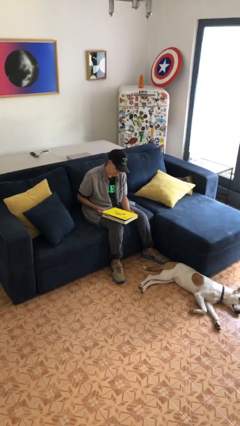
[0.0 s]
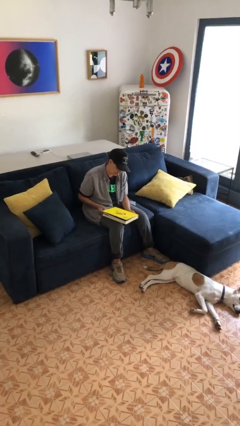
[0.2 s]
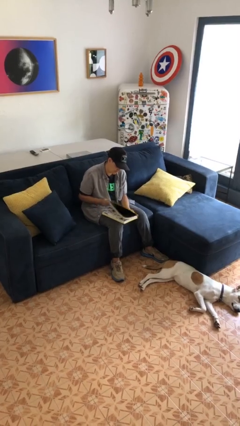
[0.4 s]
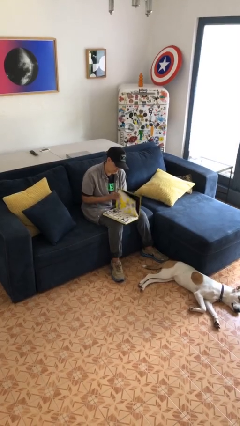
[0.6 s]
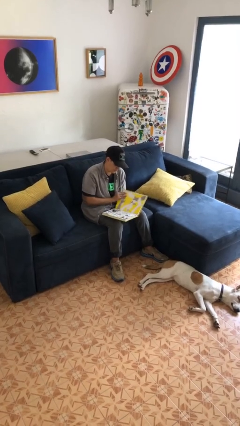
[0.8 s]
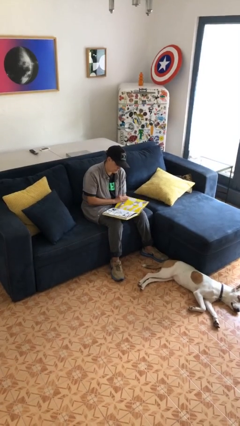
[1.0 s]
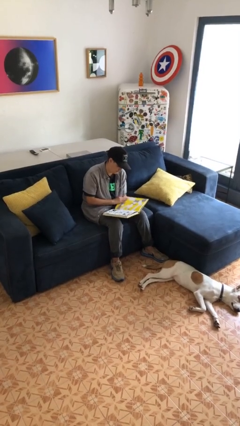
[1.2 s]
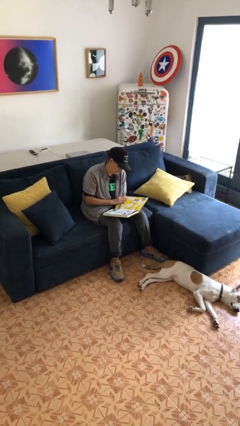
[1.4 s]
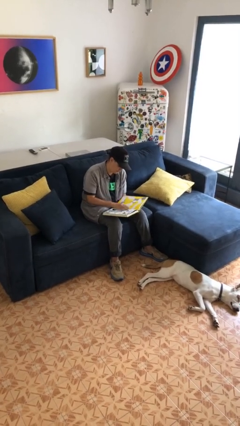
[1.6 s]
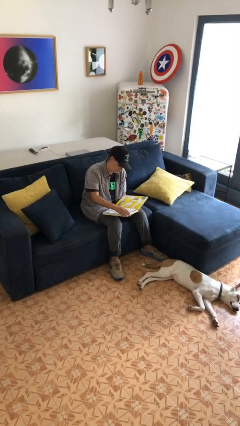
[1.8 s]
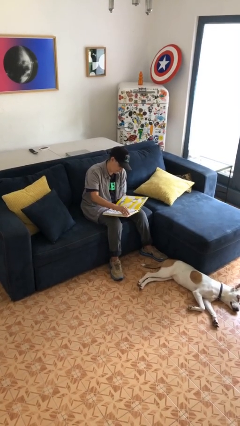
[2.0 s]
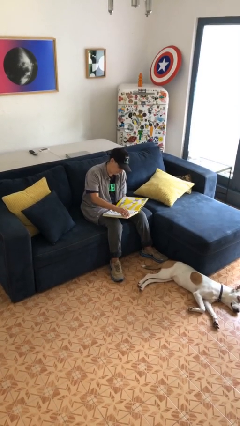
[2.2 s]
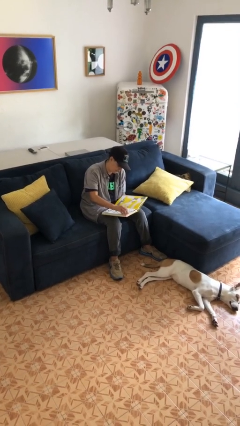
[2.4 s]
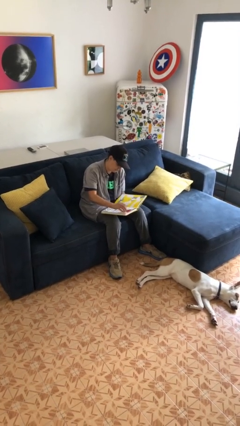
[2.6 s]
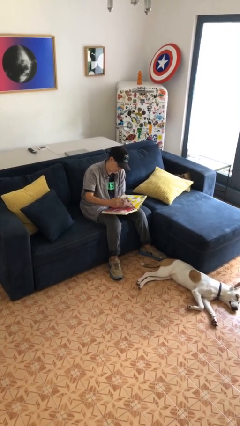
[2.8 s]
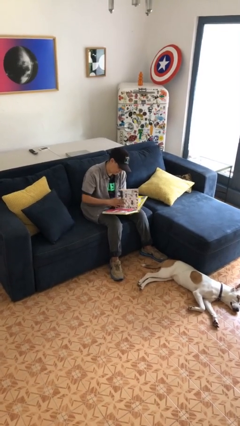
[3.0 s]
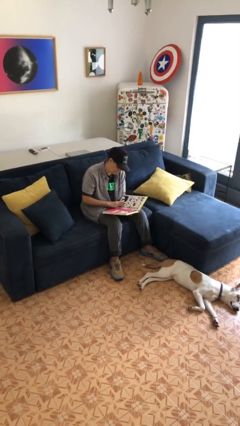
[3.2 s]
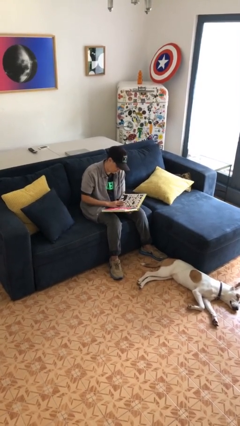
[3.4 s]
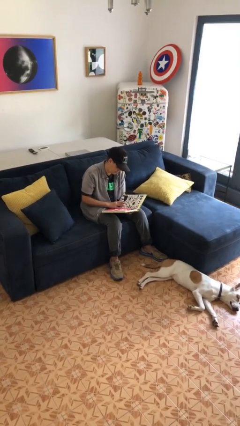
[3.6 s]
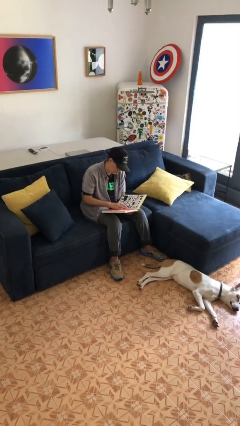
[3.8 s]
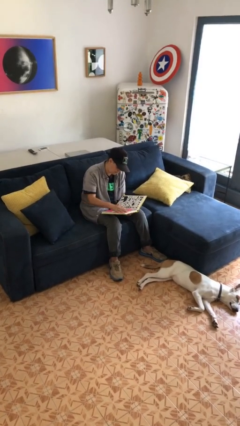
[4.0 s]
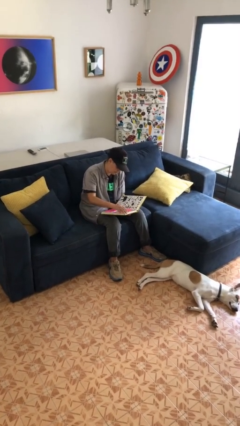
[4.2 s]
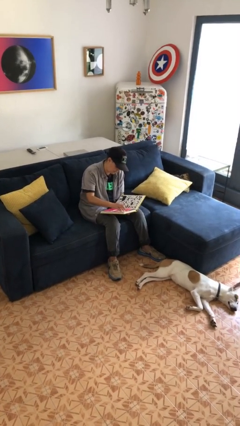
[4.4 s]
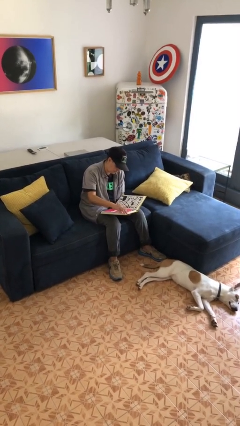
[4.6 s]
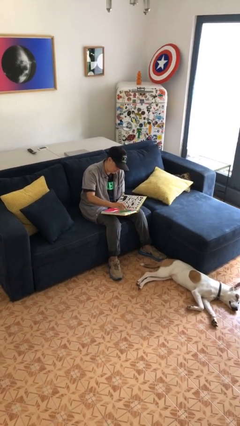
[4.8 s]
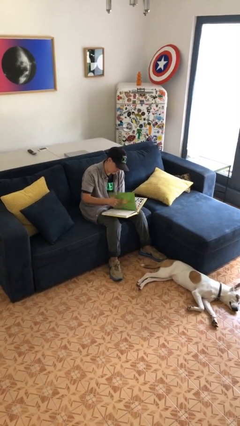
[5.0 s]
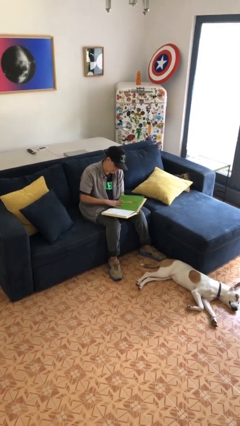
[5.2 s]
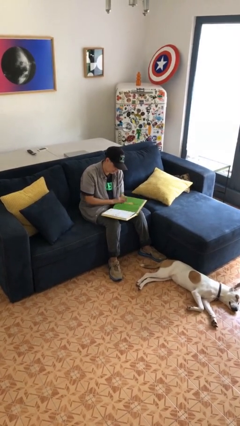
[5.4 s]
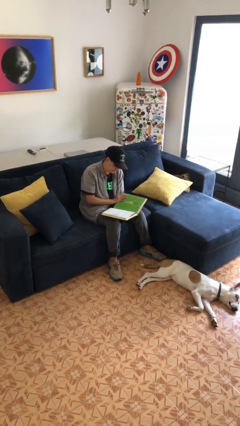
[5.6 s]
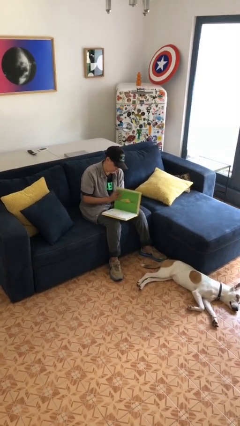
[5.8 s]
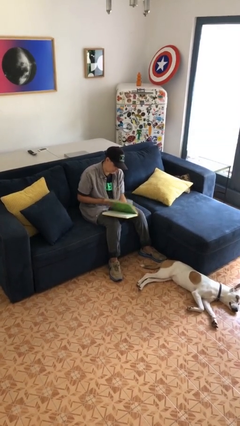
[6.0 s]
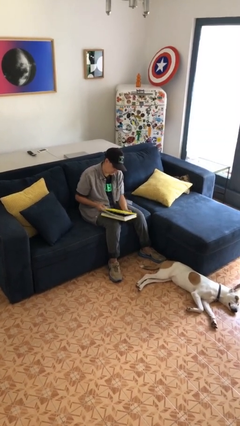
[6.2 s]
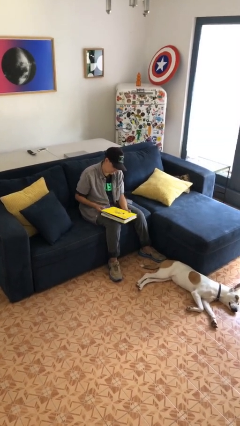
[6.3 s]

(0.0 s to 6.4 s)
person reads book

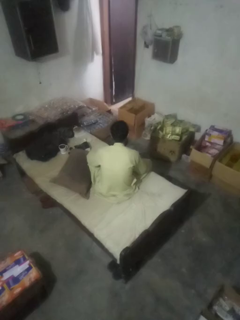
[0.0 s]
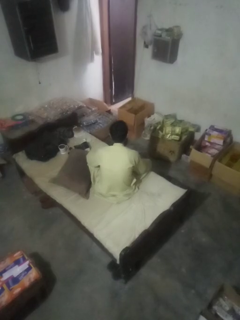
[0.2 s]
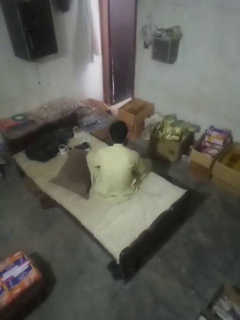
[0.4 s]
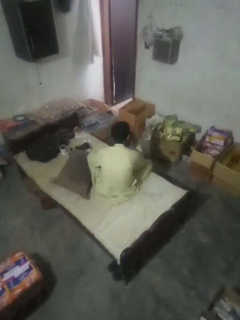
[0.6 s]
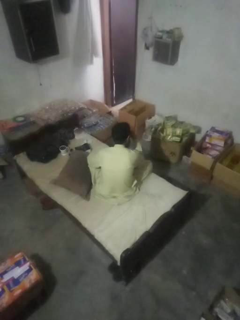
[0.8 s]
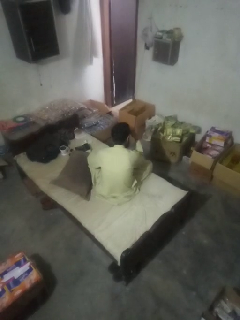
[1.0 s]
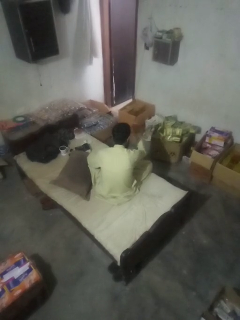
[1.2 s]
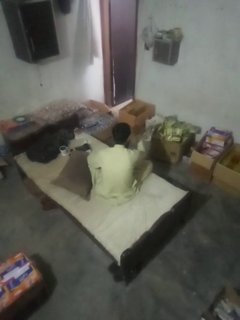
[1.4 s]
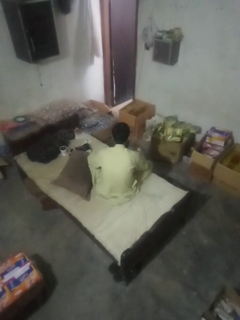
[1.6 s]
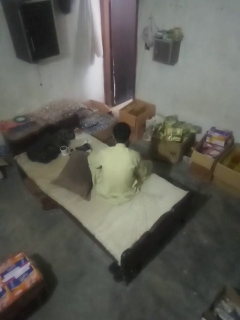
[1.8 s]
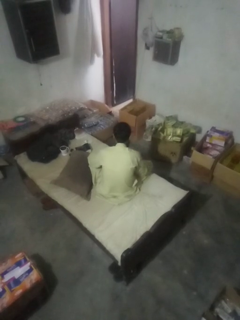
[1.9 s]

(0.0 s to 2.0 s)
person gestures watch closely

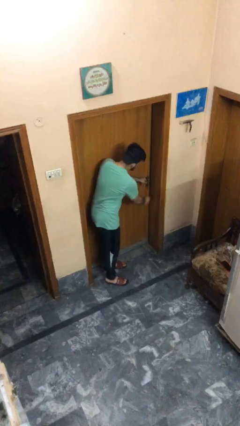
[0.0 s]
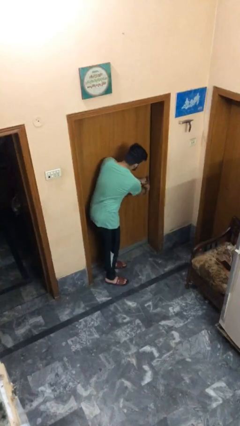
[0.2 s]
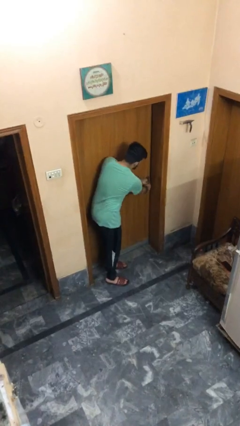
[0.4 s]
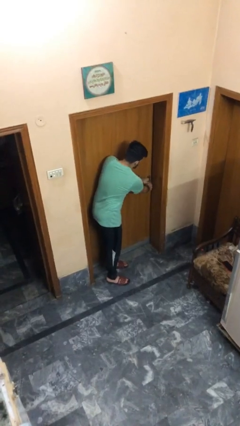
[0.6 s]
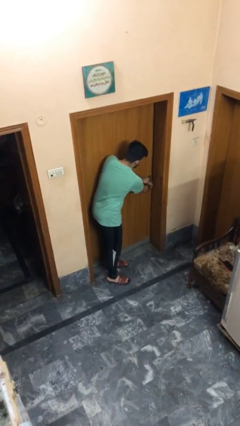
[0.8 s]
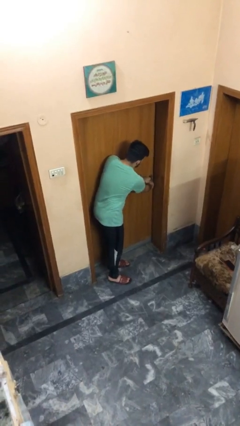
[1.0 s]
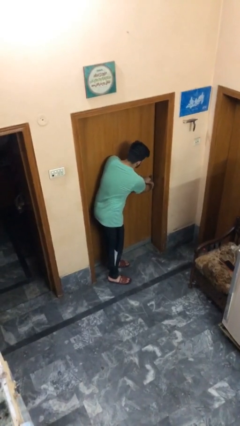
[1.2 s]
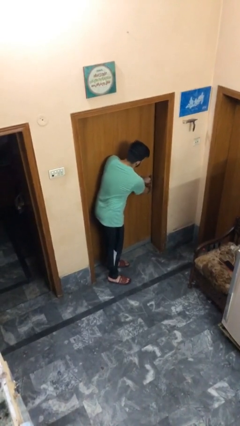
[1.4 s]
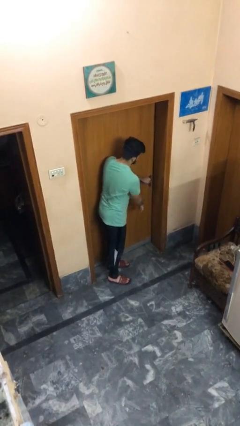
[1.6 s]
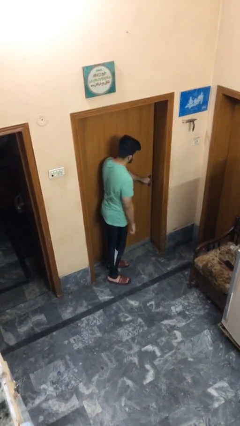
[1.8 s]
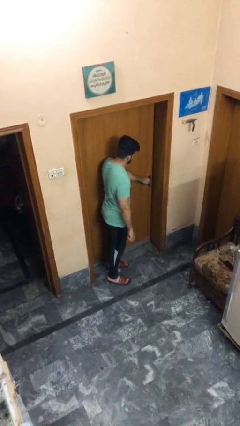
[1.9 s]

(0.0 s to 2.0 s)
person locks door with keys

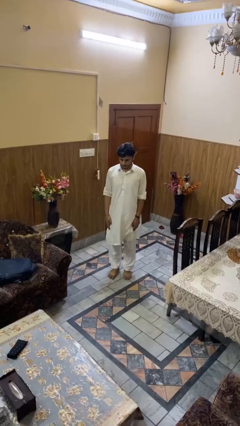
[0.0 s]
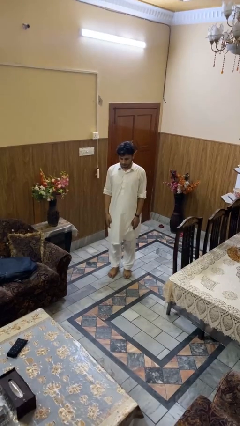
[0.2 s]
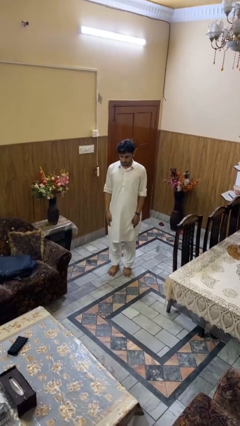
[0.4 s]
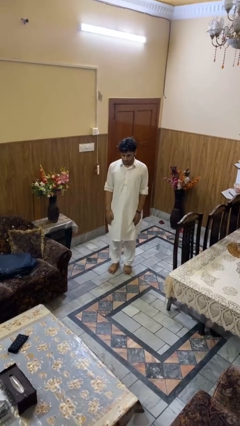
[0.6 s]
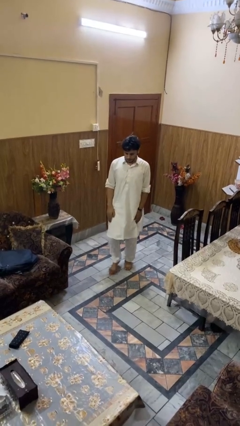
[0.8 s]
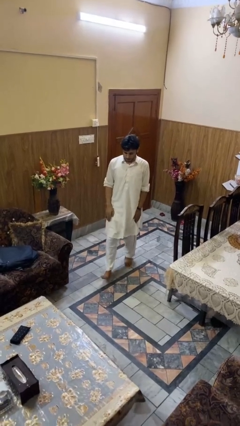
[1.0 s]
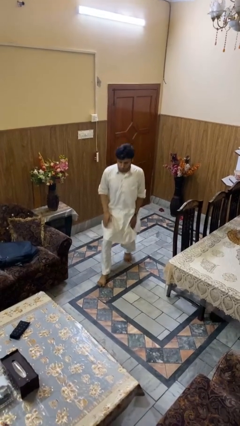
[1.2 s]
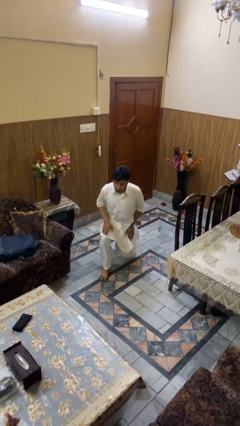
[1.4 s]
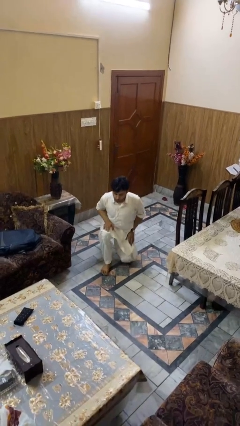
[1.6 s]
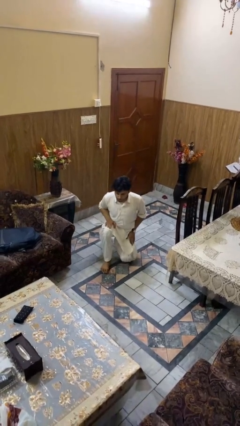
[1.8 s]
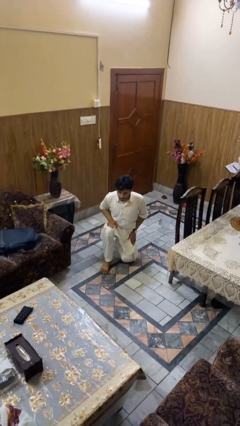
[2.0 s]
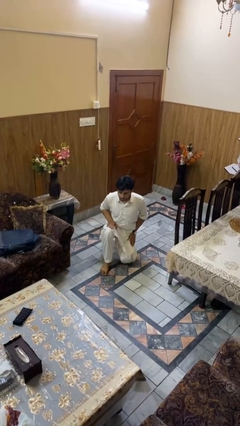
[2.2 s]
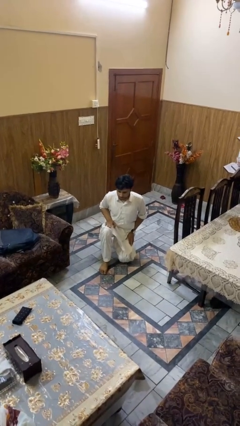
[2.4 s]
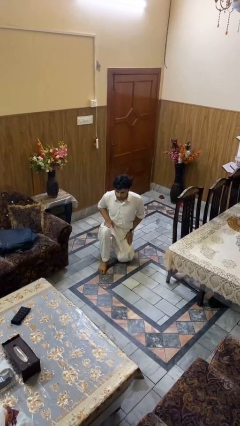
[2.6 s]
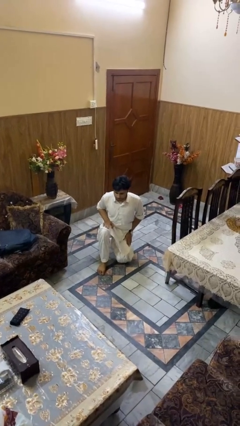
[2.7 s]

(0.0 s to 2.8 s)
person kneels

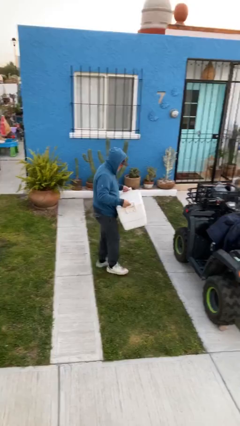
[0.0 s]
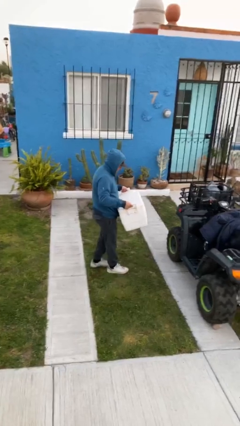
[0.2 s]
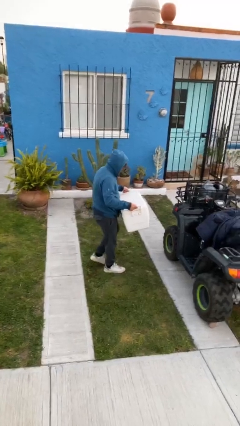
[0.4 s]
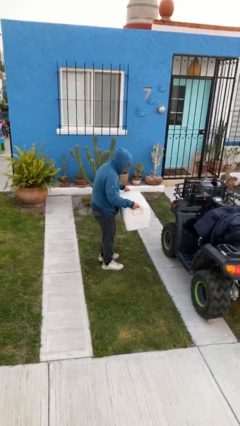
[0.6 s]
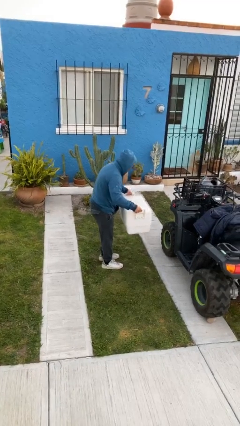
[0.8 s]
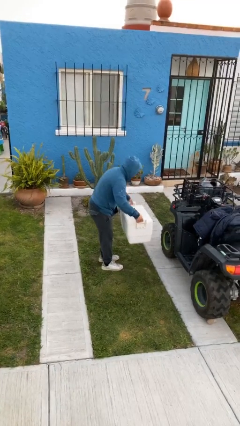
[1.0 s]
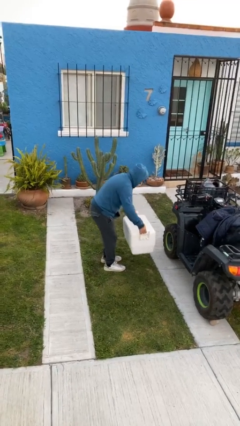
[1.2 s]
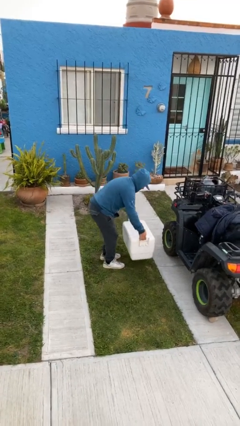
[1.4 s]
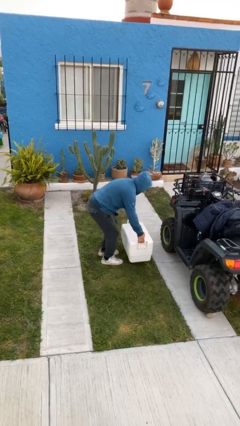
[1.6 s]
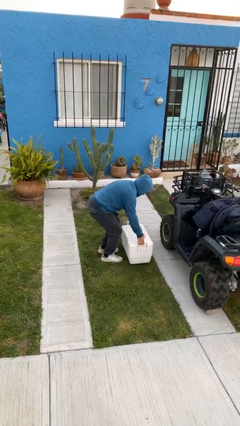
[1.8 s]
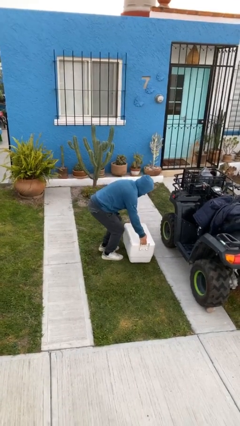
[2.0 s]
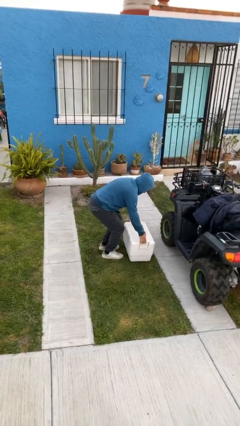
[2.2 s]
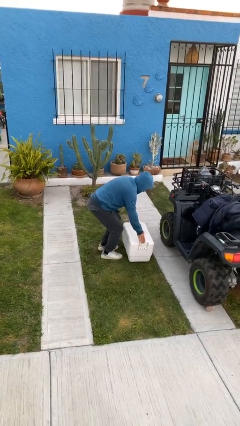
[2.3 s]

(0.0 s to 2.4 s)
person puts down object on floor

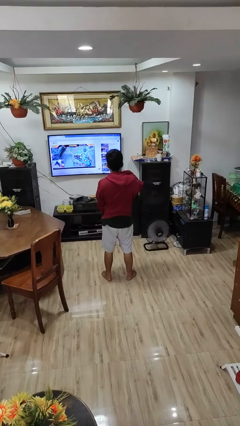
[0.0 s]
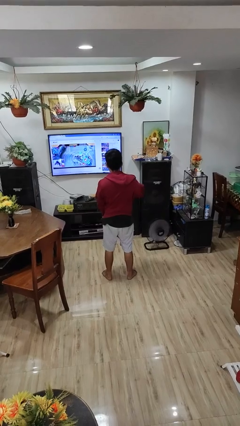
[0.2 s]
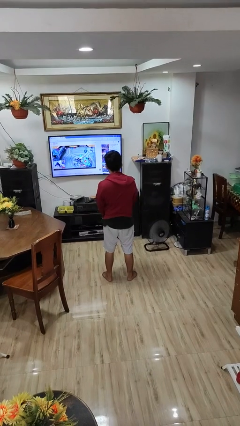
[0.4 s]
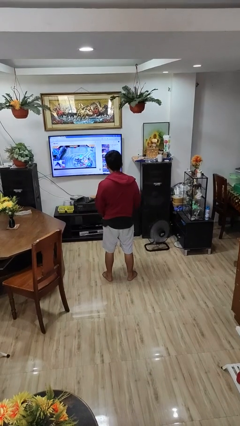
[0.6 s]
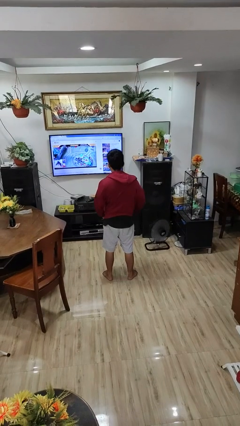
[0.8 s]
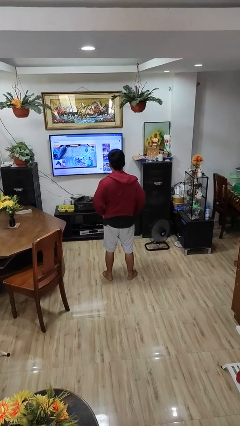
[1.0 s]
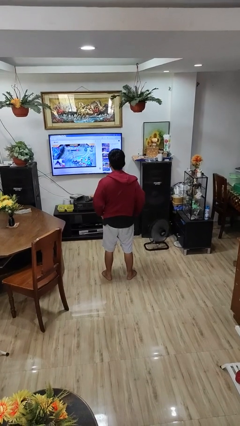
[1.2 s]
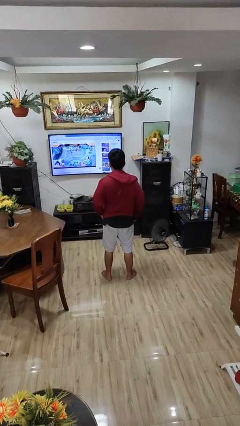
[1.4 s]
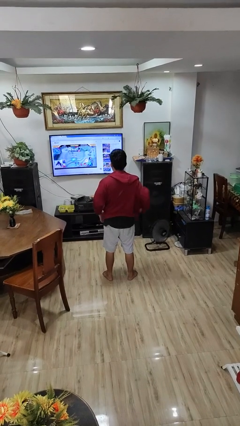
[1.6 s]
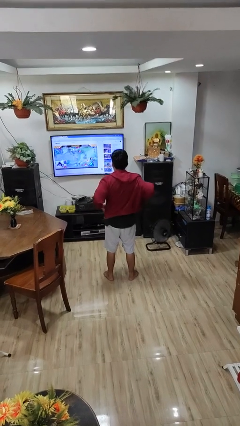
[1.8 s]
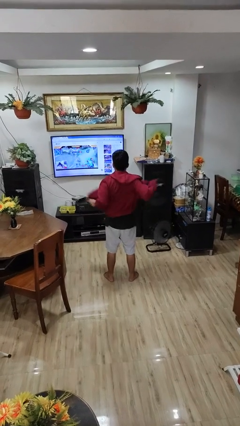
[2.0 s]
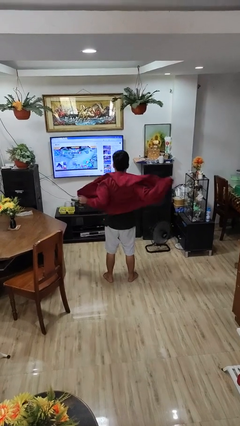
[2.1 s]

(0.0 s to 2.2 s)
person unzips jacket
